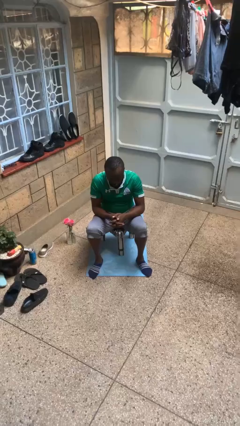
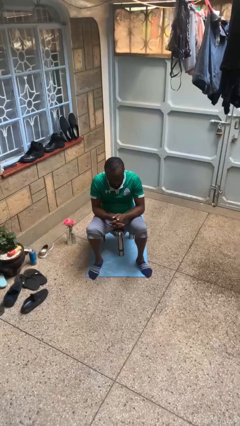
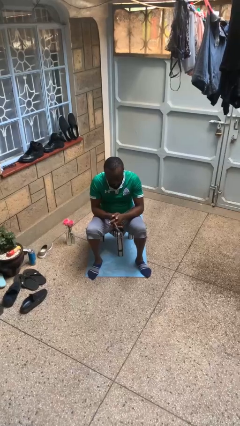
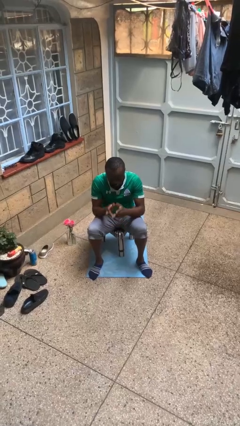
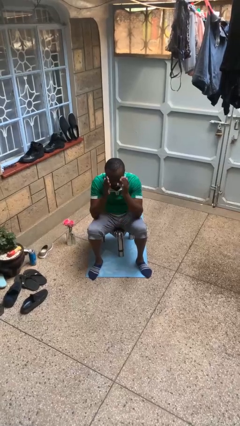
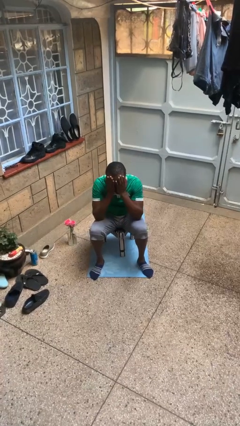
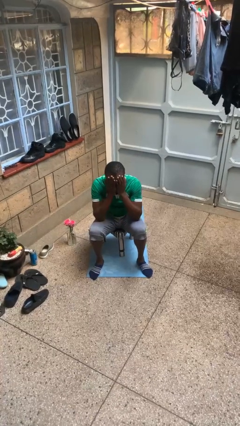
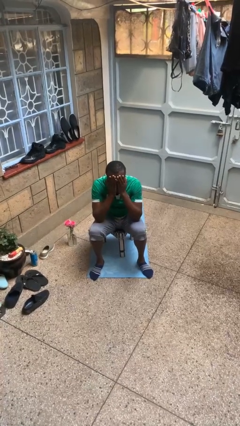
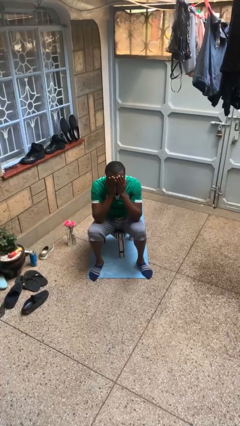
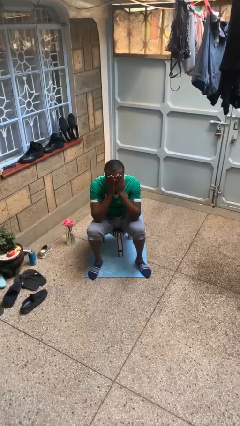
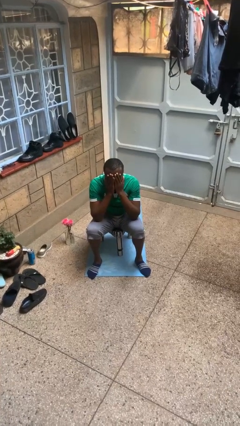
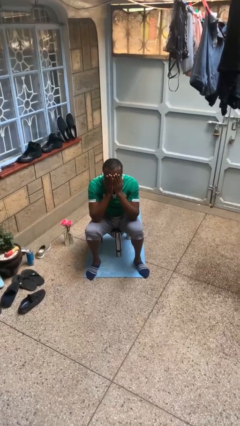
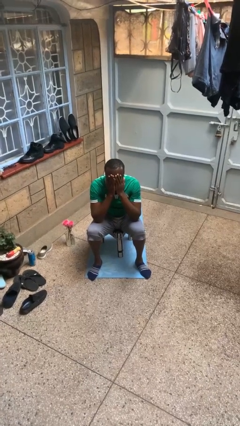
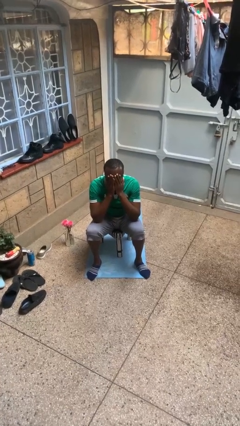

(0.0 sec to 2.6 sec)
person covers face with hands

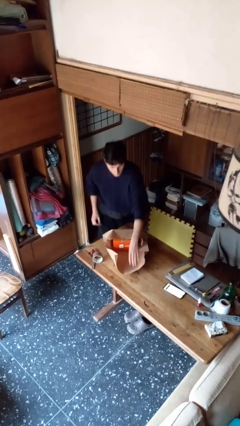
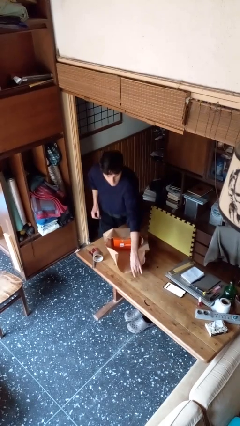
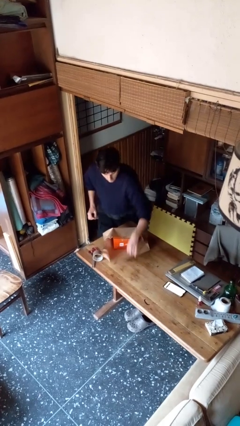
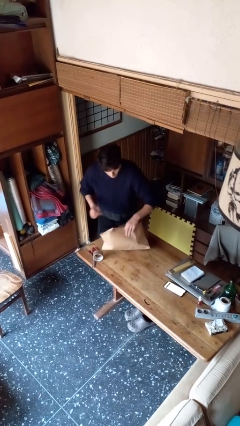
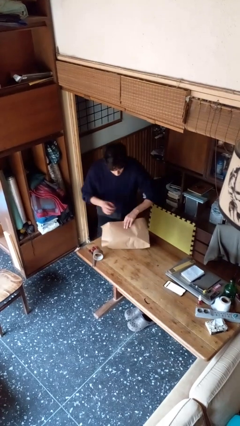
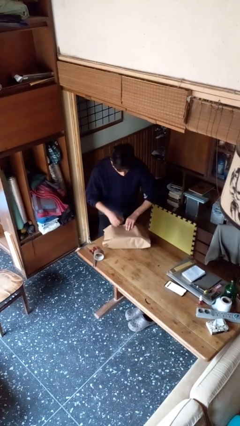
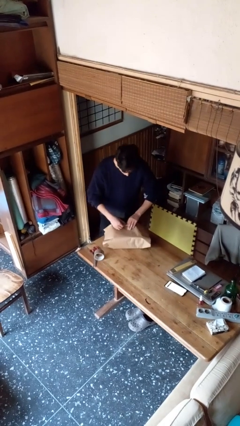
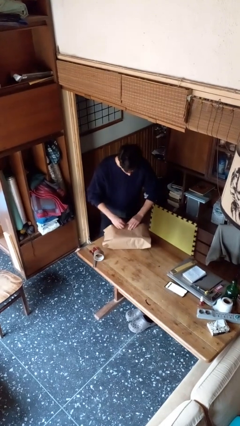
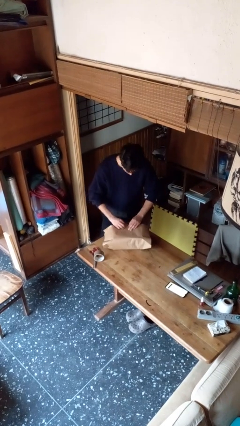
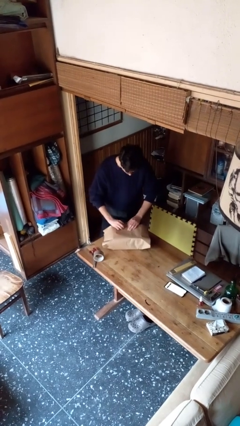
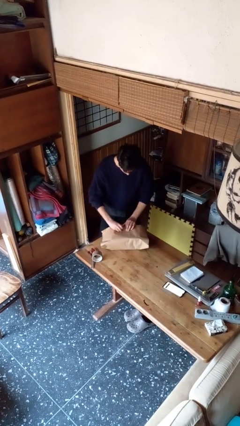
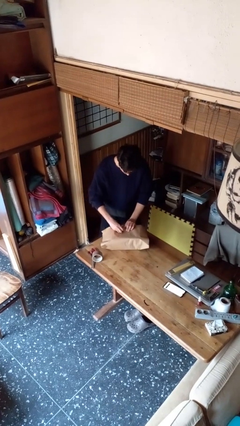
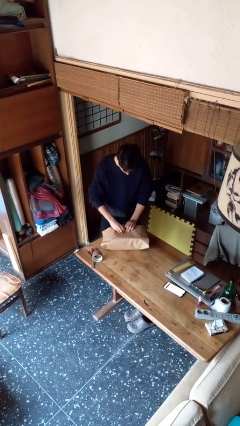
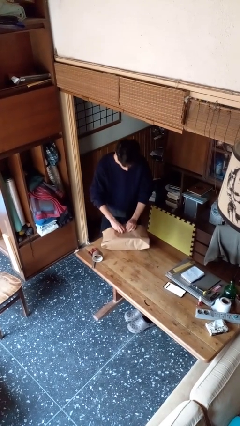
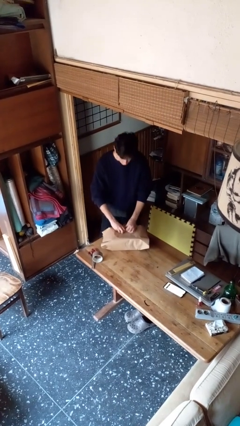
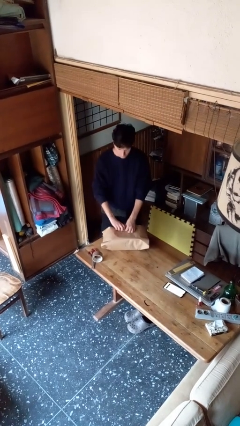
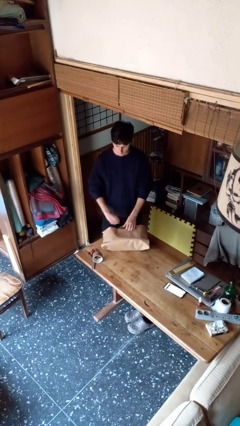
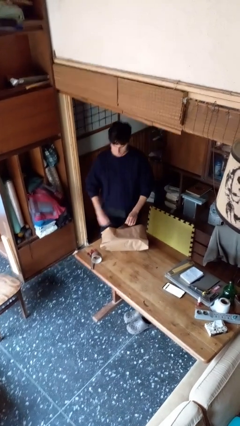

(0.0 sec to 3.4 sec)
person wraps box

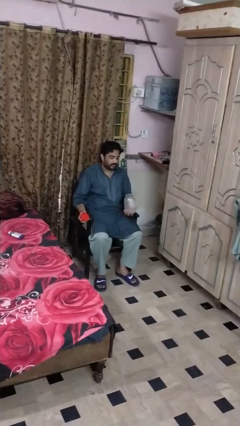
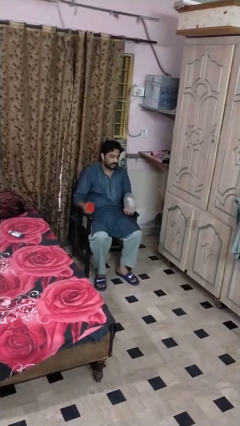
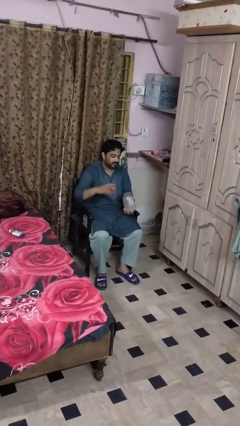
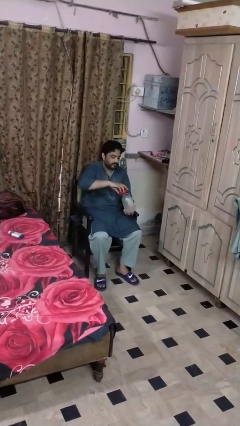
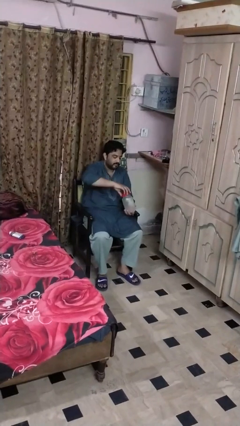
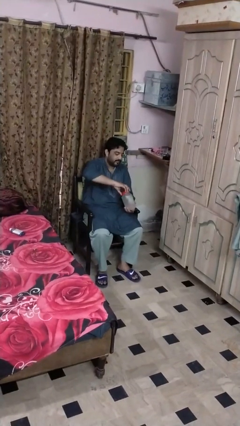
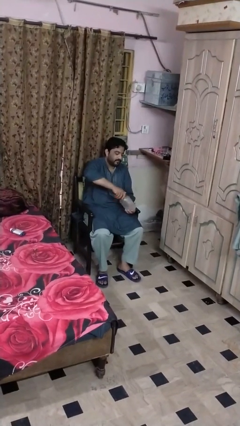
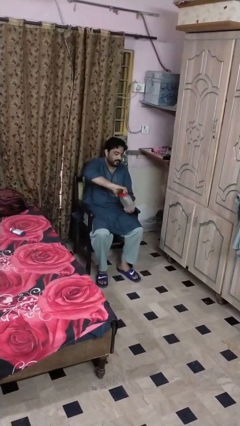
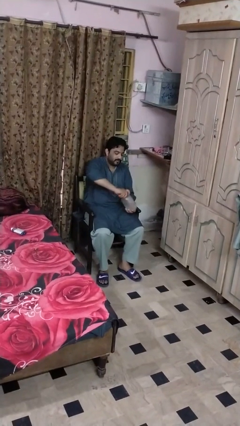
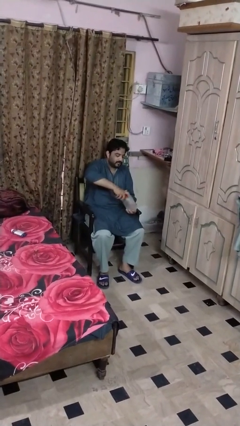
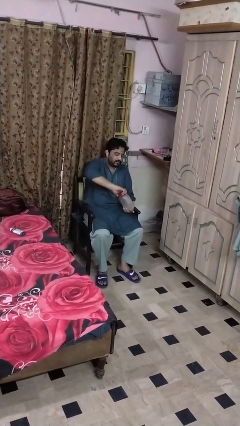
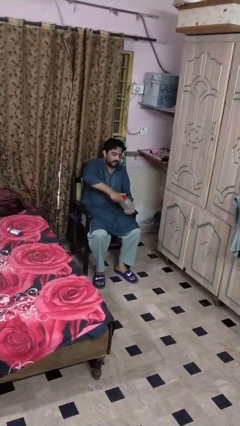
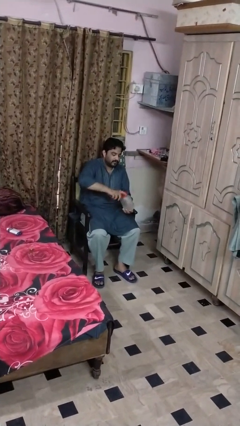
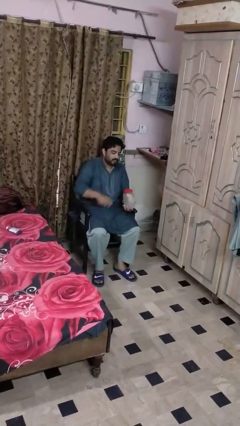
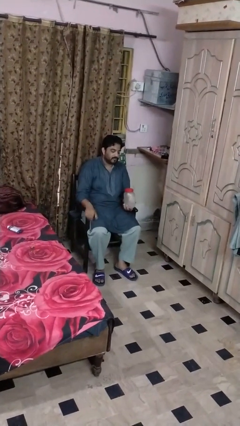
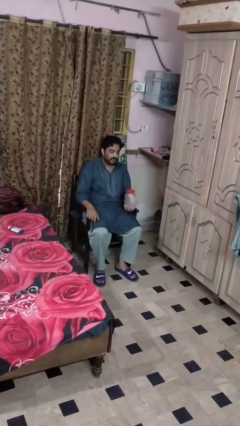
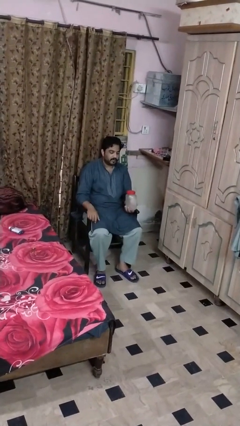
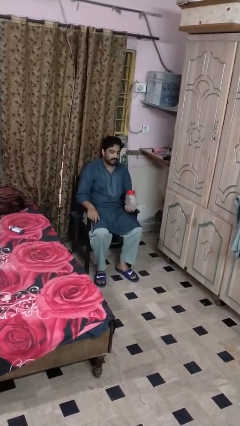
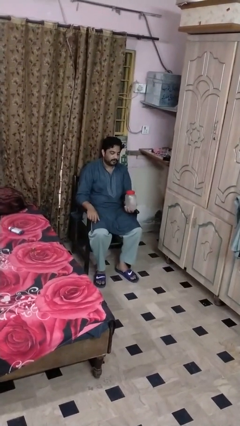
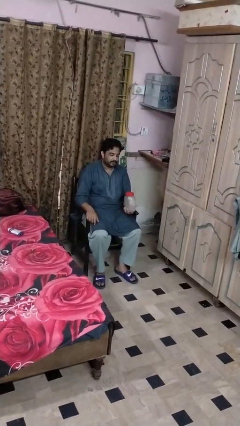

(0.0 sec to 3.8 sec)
person closes jar

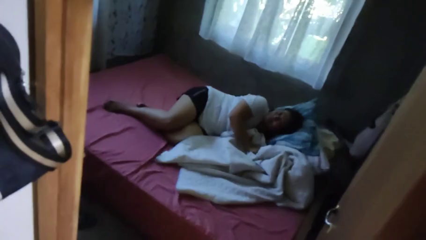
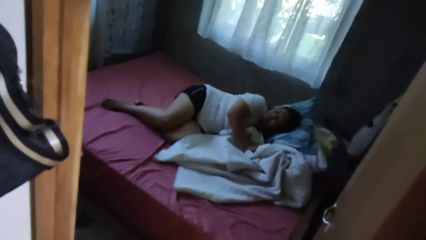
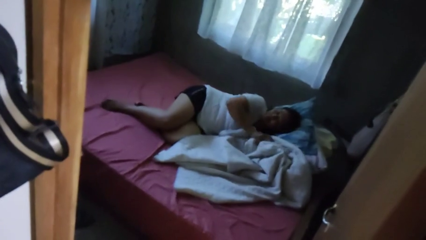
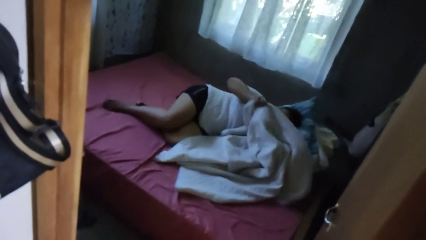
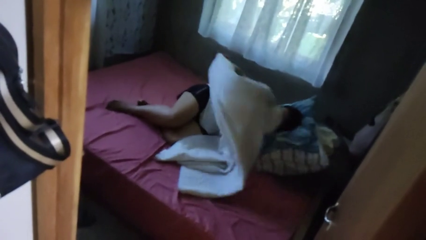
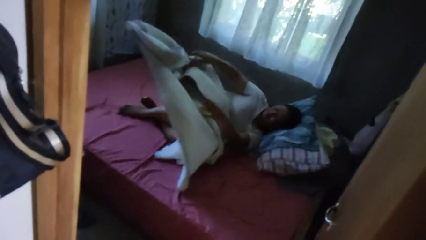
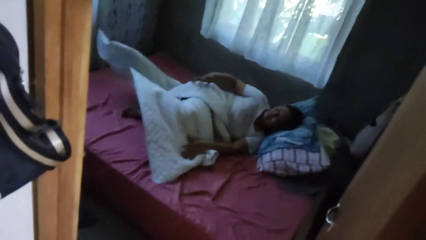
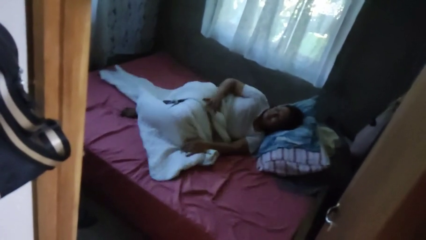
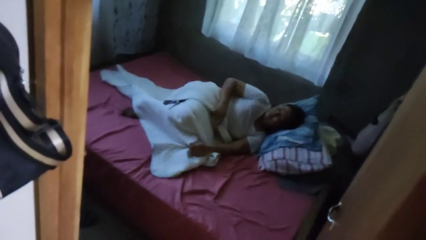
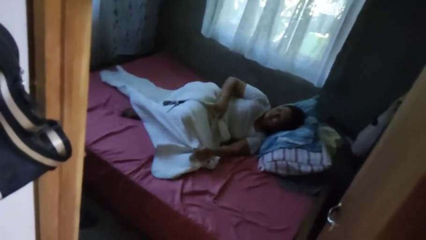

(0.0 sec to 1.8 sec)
person covers with bedsheets

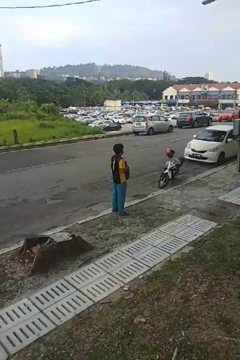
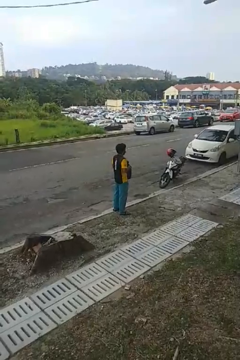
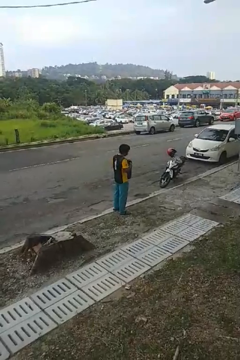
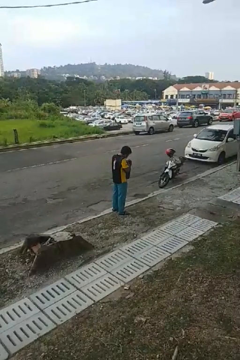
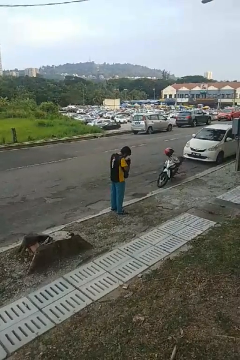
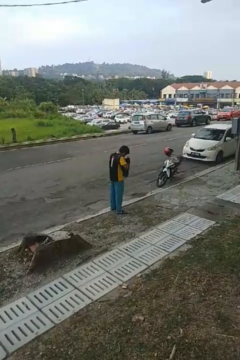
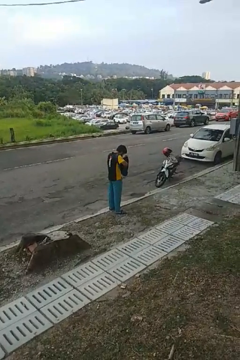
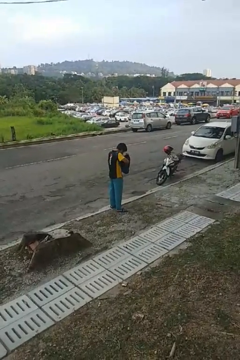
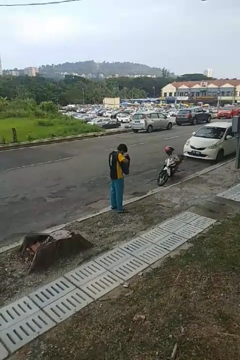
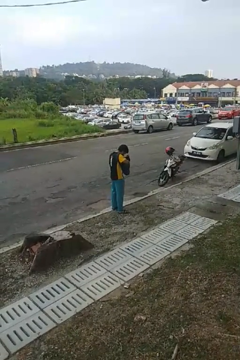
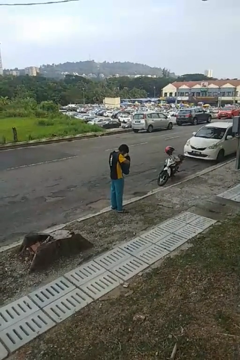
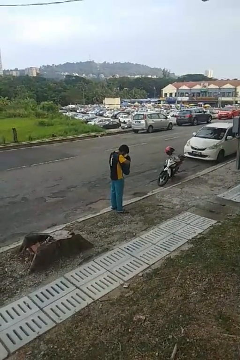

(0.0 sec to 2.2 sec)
person searches in backpack

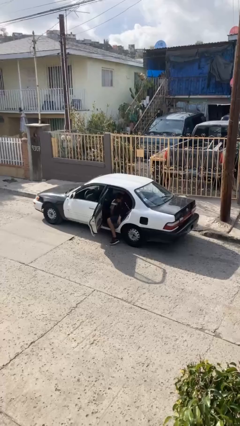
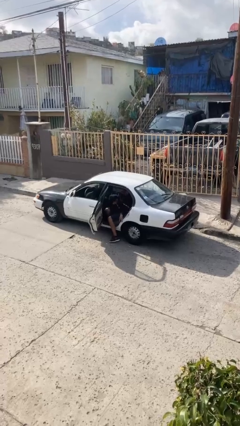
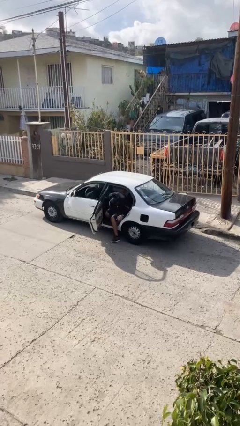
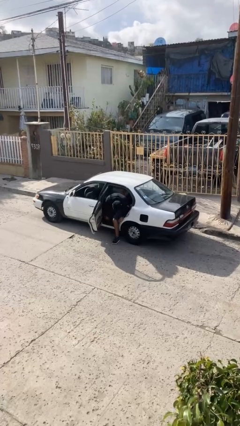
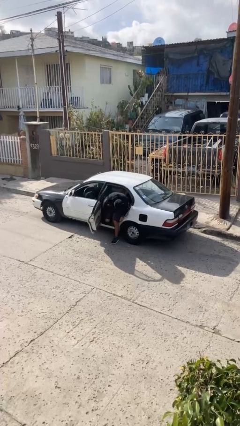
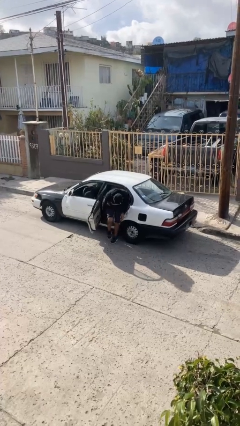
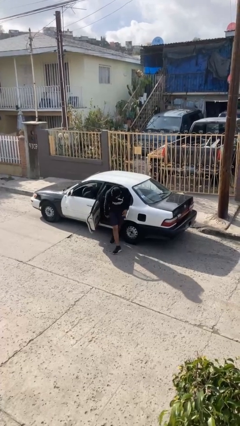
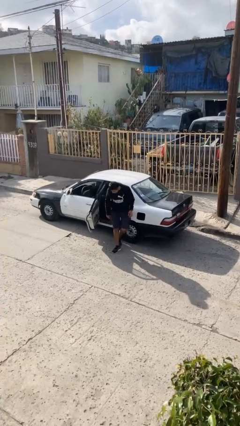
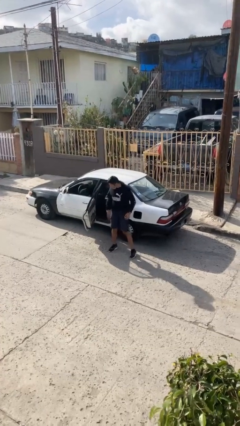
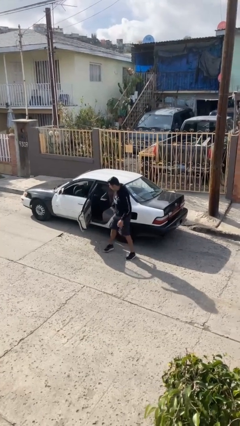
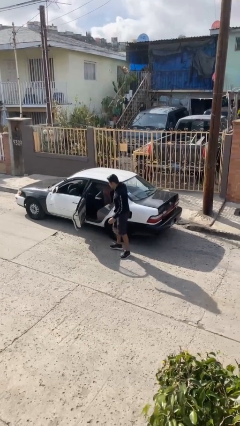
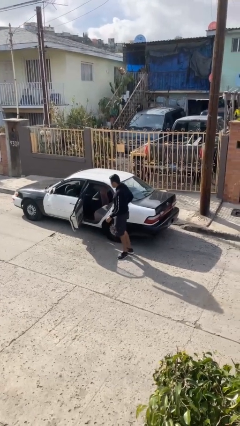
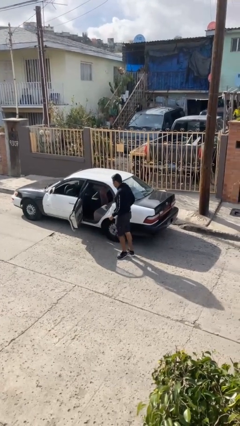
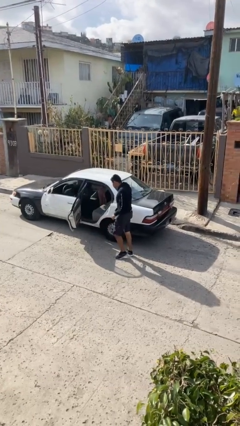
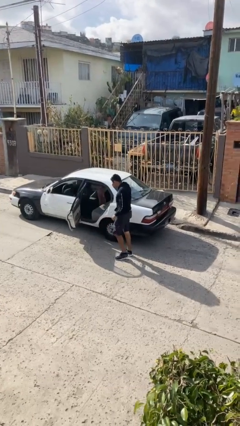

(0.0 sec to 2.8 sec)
person exits car

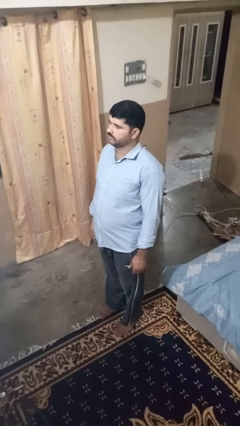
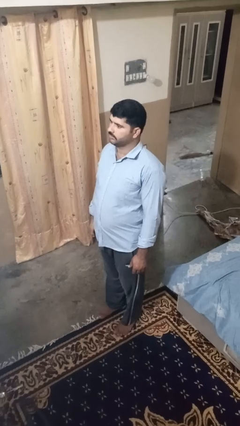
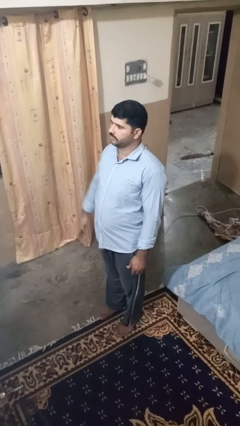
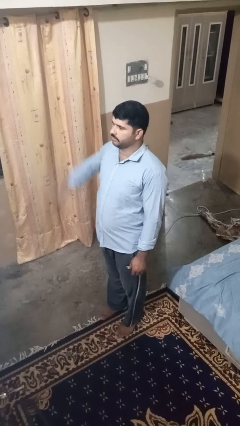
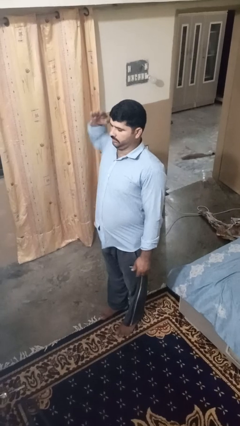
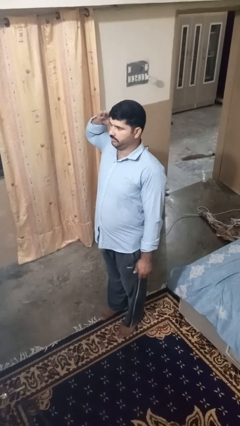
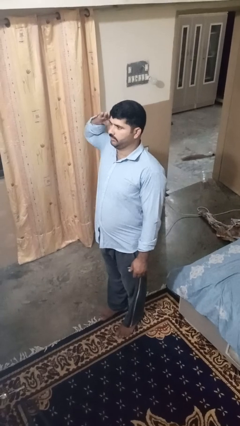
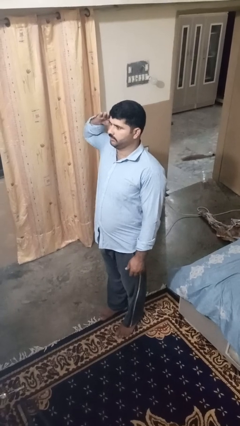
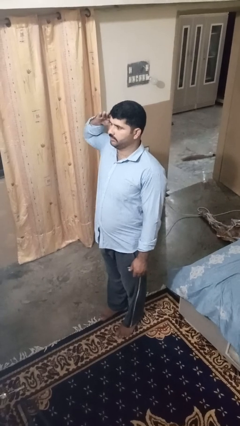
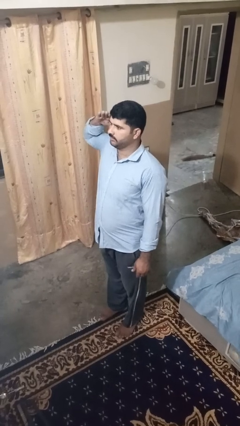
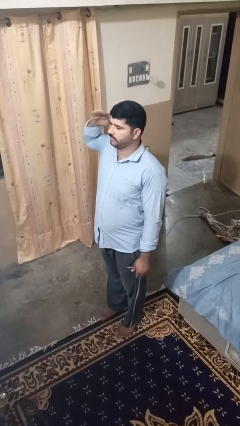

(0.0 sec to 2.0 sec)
person salutes
